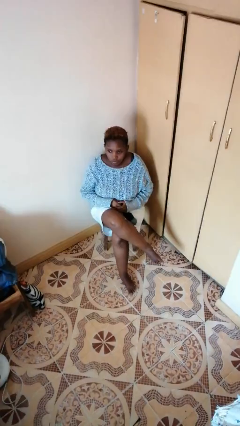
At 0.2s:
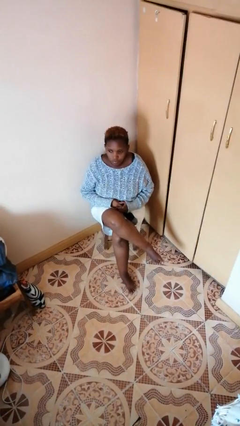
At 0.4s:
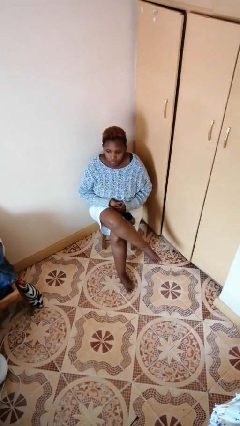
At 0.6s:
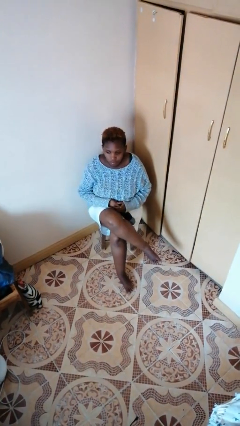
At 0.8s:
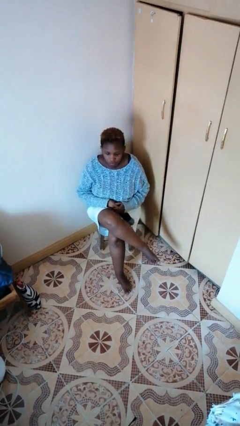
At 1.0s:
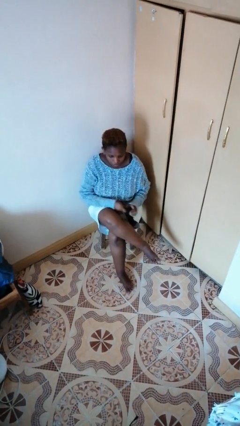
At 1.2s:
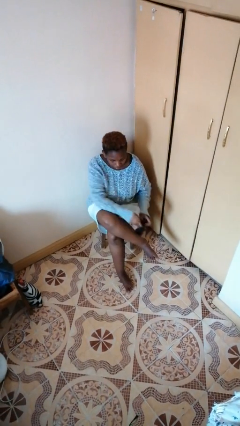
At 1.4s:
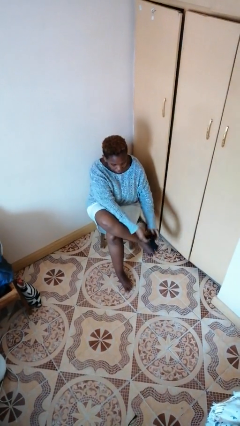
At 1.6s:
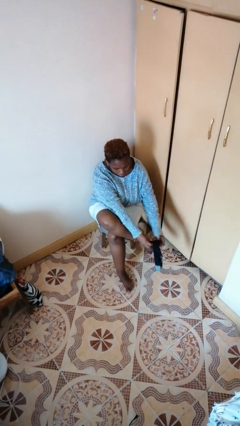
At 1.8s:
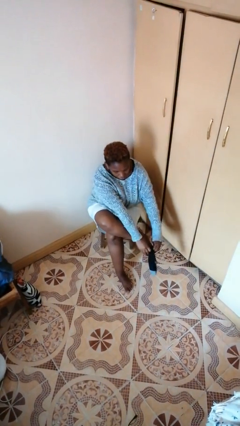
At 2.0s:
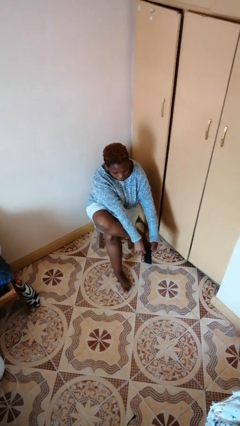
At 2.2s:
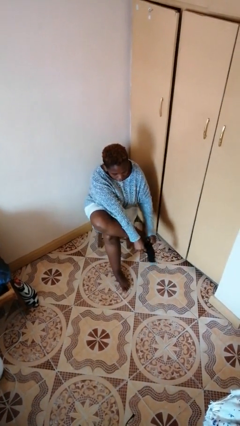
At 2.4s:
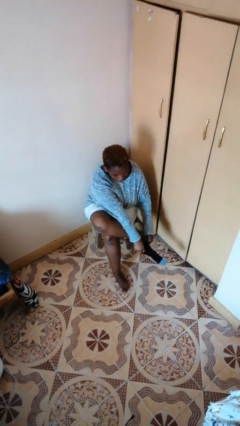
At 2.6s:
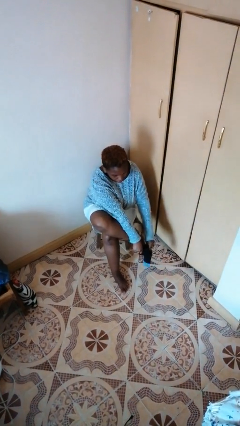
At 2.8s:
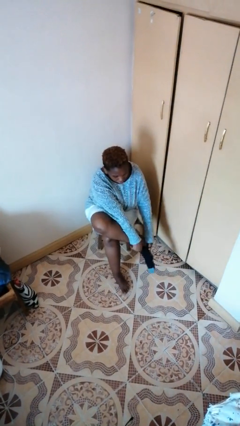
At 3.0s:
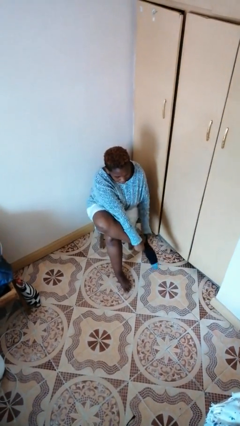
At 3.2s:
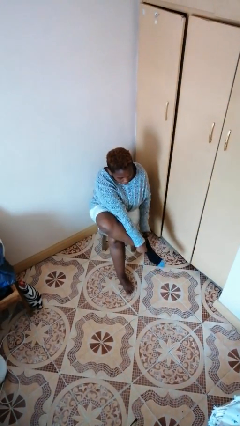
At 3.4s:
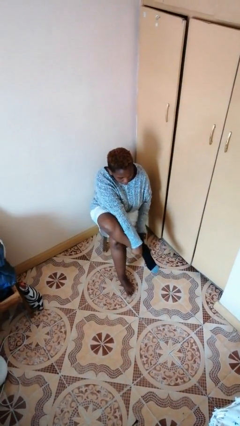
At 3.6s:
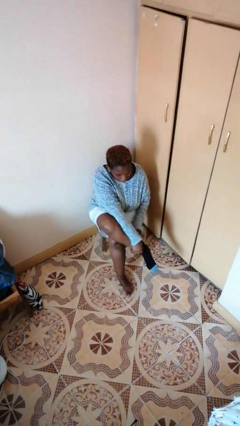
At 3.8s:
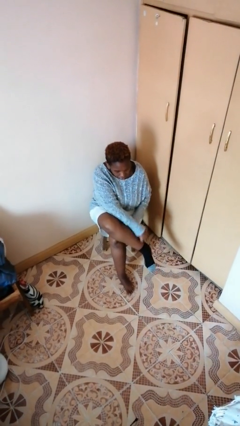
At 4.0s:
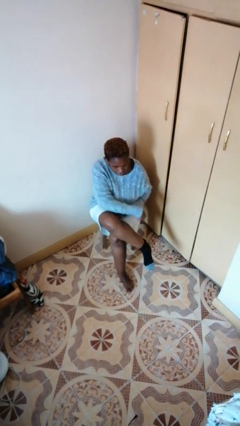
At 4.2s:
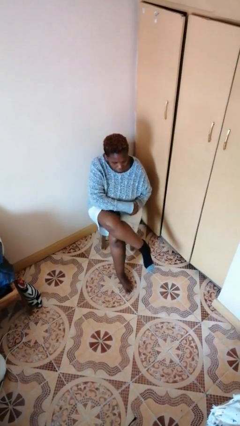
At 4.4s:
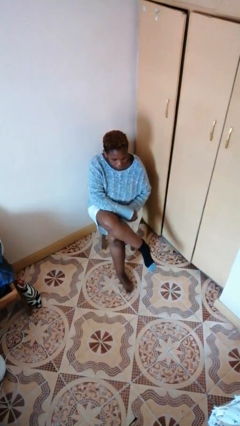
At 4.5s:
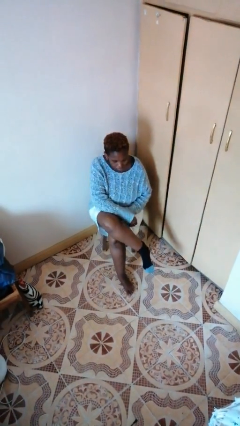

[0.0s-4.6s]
person puts on socks

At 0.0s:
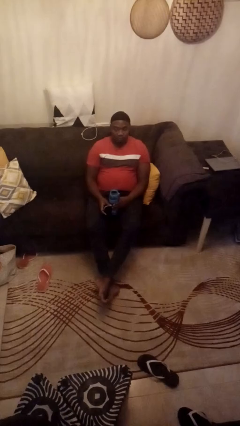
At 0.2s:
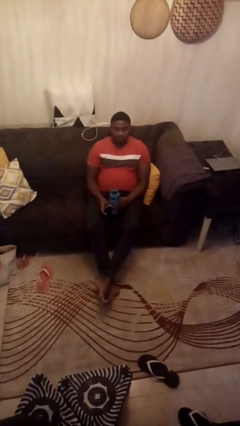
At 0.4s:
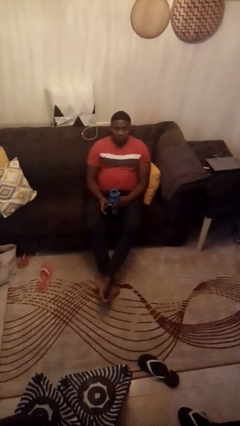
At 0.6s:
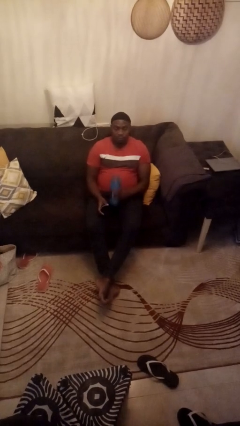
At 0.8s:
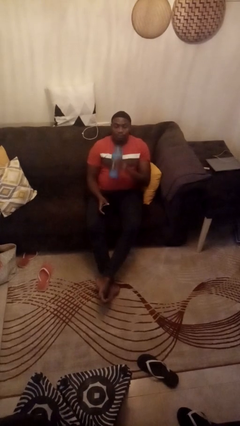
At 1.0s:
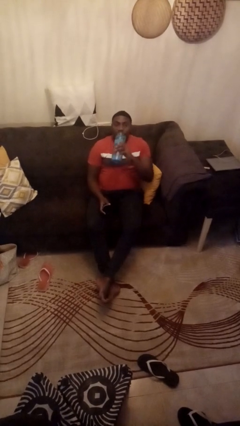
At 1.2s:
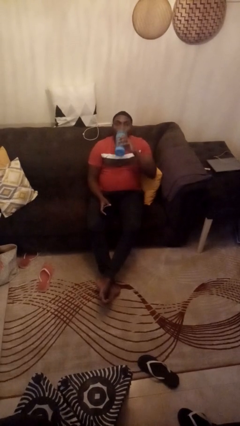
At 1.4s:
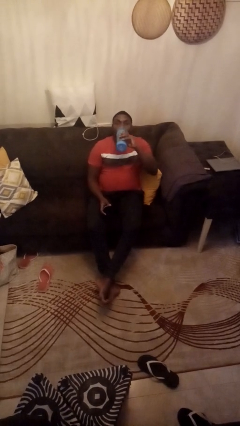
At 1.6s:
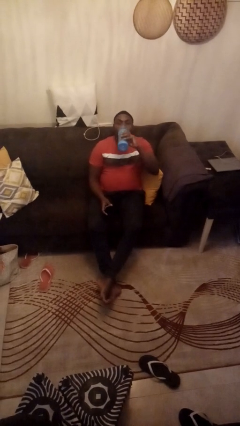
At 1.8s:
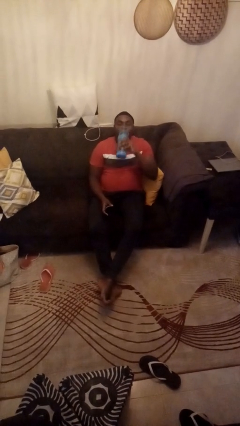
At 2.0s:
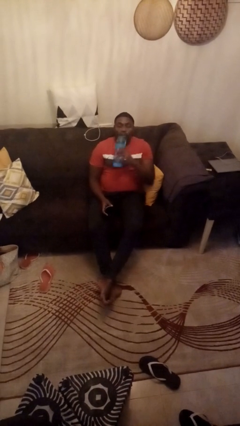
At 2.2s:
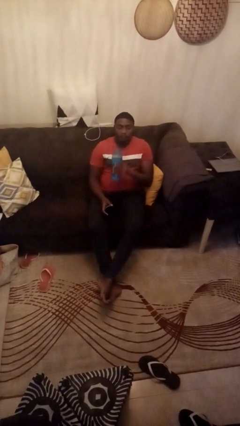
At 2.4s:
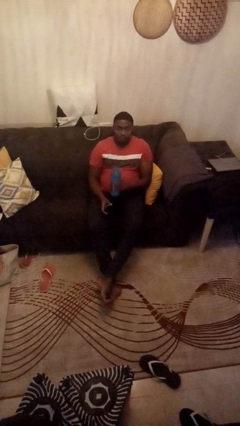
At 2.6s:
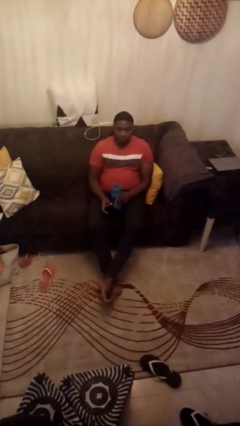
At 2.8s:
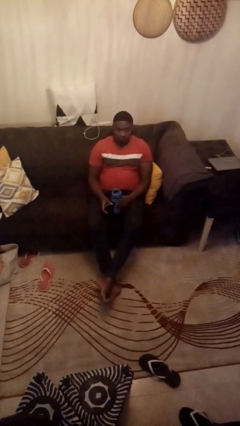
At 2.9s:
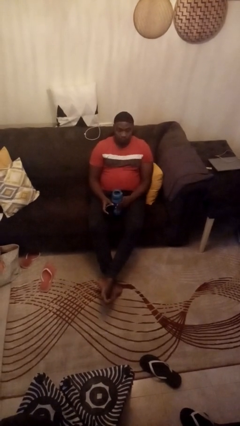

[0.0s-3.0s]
person drinks from bottle

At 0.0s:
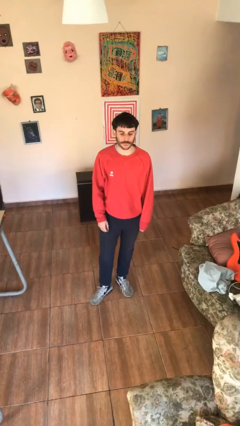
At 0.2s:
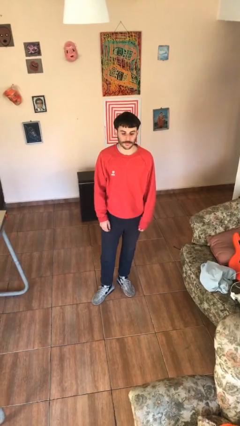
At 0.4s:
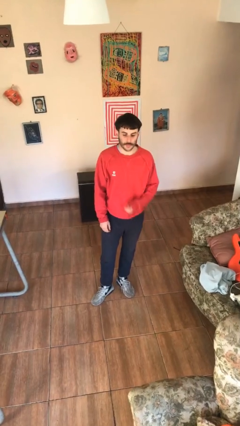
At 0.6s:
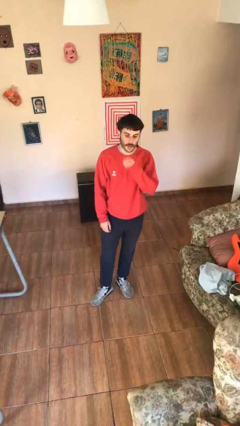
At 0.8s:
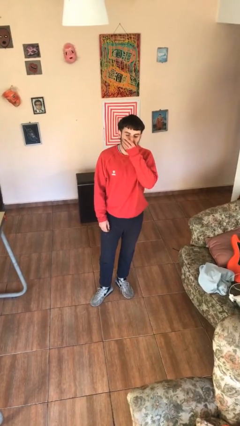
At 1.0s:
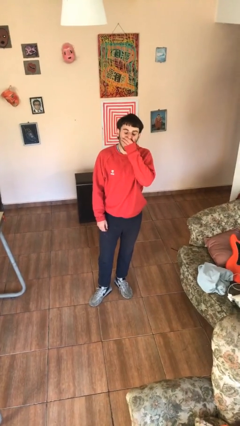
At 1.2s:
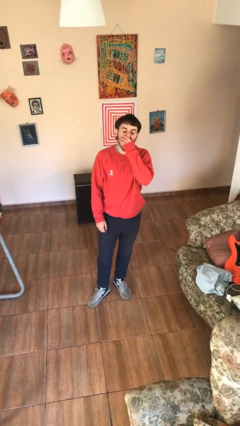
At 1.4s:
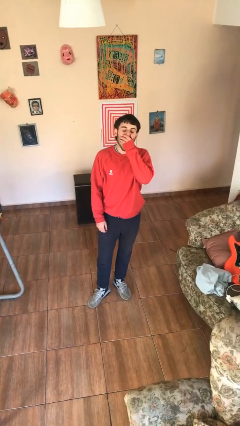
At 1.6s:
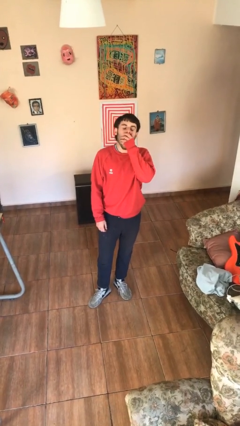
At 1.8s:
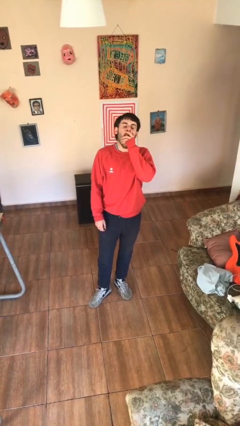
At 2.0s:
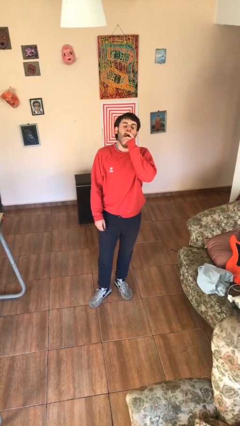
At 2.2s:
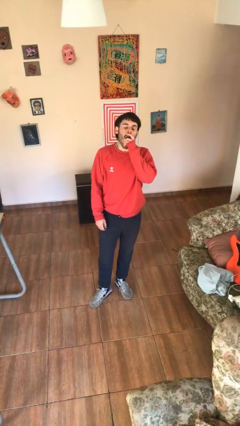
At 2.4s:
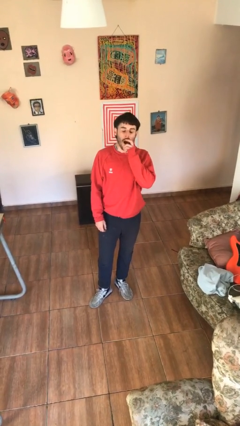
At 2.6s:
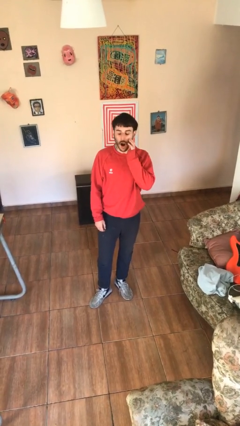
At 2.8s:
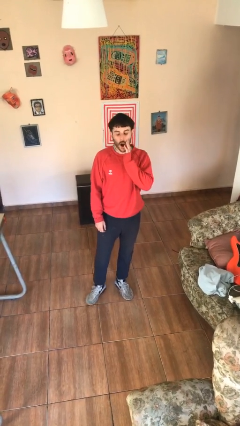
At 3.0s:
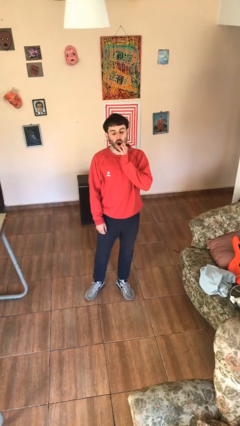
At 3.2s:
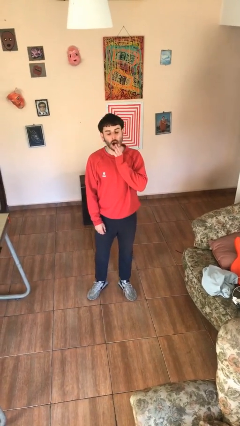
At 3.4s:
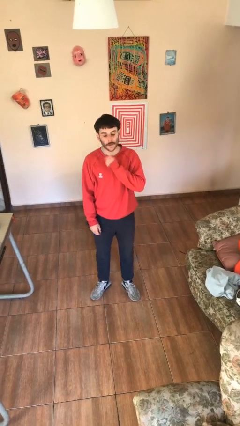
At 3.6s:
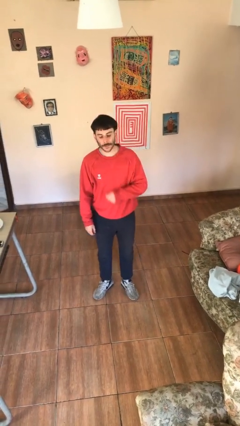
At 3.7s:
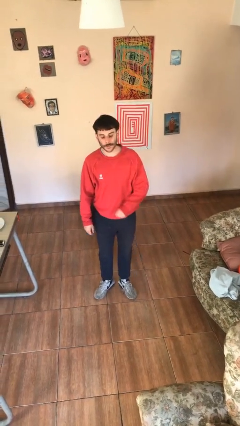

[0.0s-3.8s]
person yawns

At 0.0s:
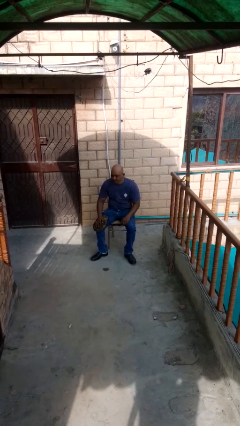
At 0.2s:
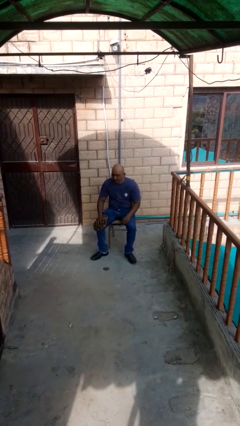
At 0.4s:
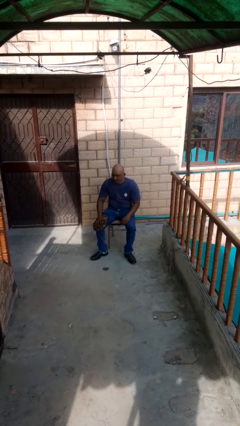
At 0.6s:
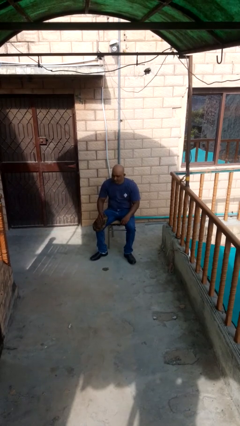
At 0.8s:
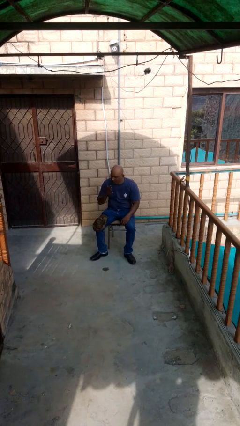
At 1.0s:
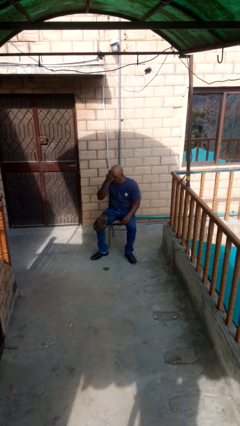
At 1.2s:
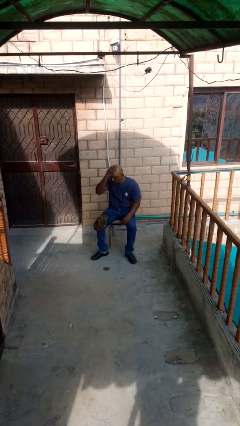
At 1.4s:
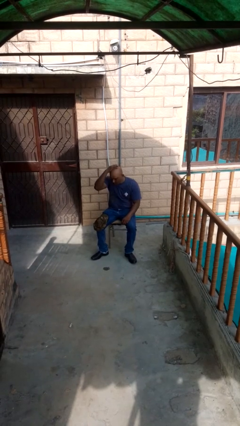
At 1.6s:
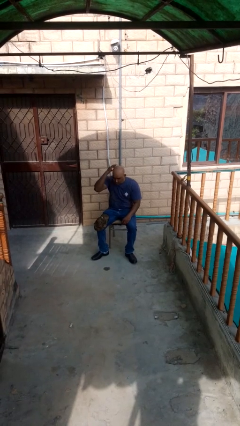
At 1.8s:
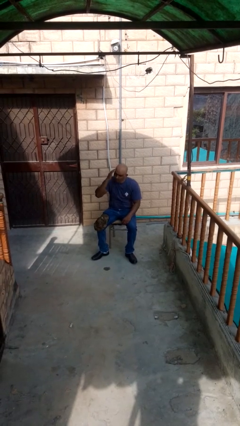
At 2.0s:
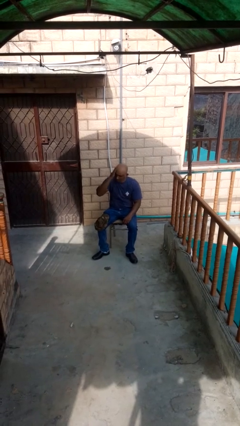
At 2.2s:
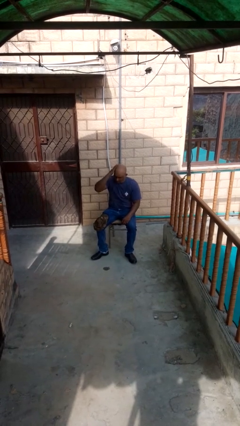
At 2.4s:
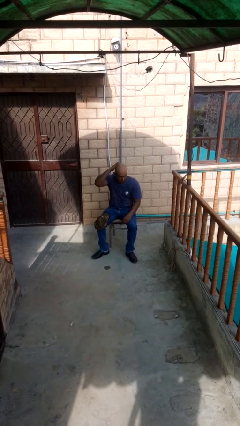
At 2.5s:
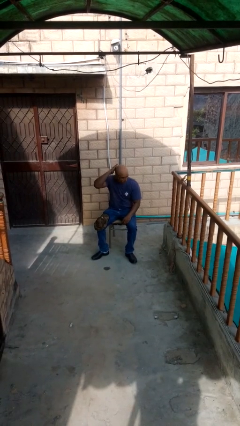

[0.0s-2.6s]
person strokes hair

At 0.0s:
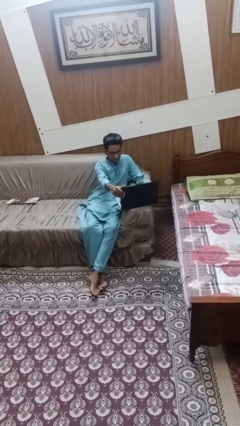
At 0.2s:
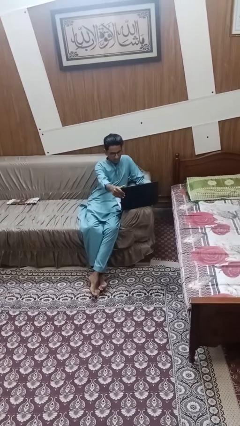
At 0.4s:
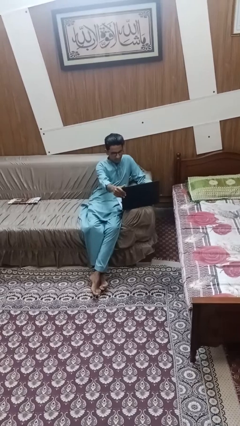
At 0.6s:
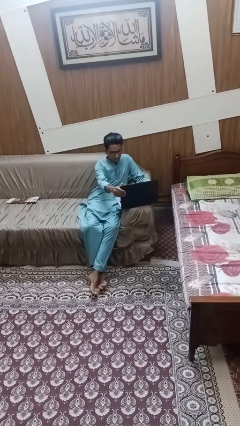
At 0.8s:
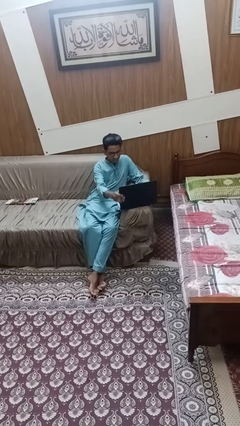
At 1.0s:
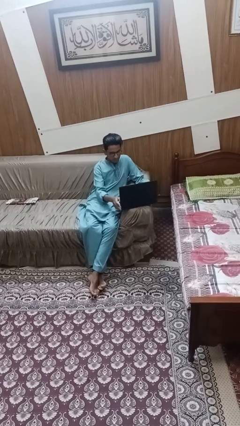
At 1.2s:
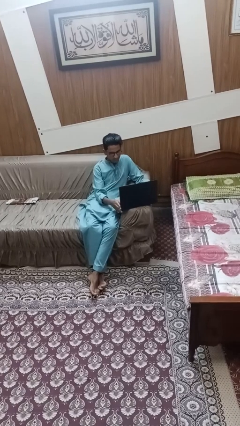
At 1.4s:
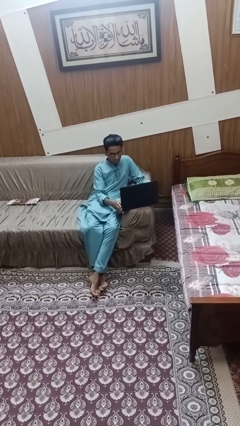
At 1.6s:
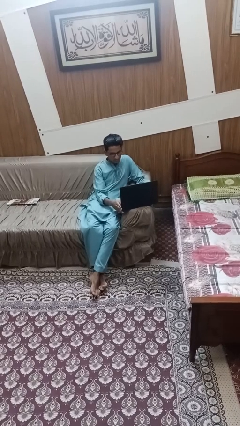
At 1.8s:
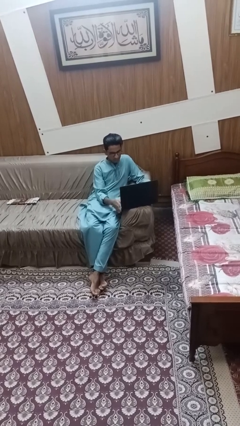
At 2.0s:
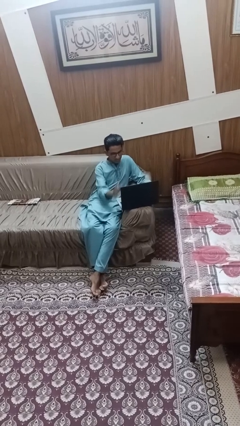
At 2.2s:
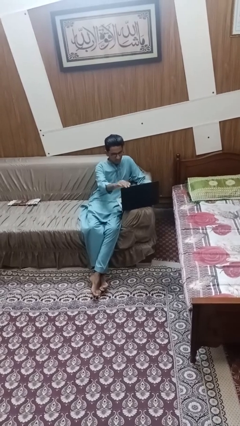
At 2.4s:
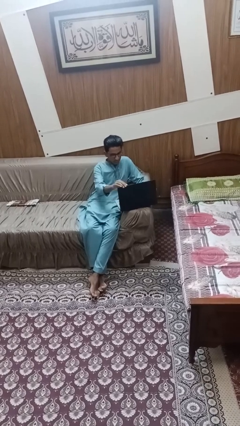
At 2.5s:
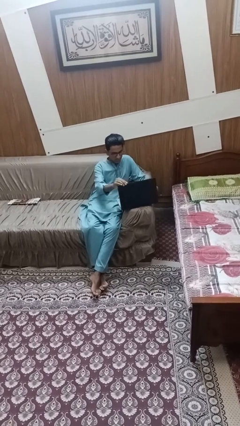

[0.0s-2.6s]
person opens laptop

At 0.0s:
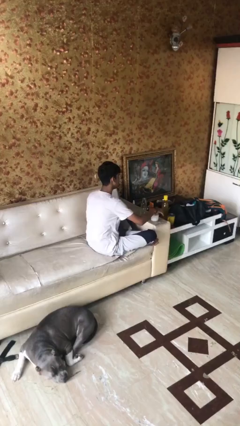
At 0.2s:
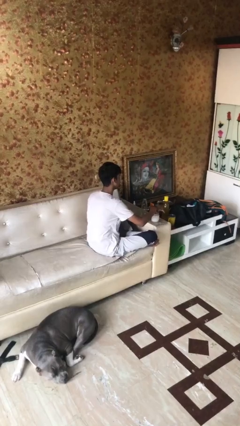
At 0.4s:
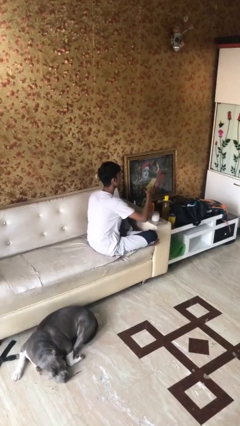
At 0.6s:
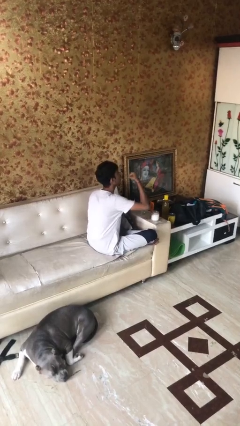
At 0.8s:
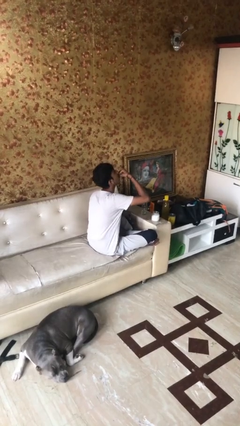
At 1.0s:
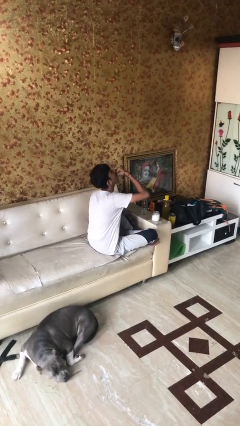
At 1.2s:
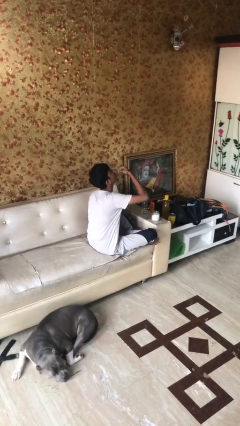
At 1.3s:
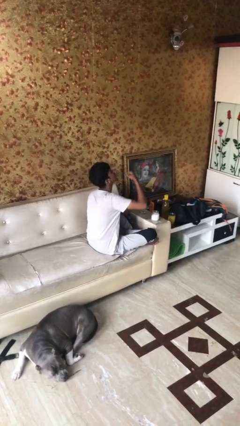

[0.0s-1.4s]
person takes medicine pills
